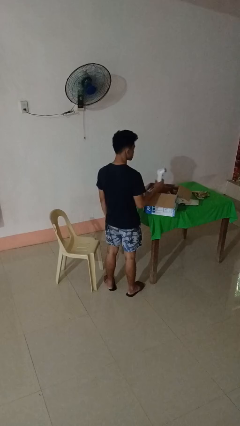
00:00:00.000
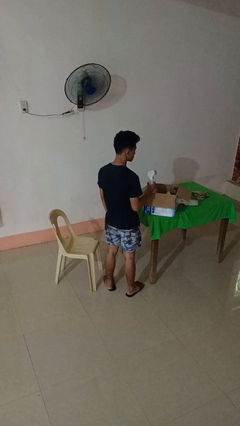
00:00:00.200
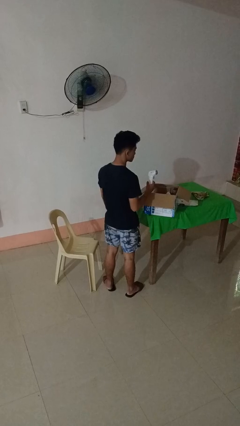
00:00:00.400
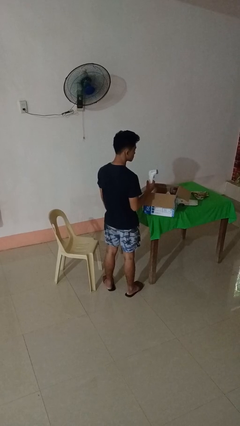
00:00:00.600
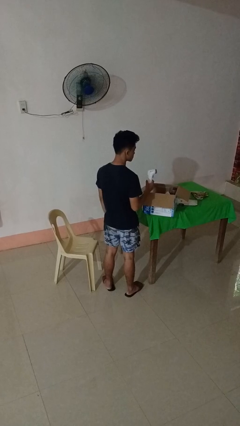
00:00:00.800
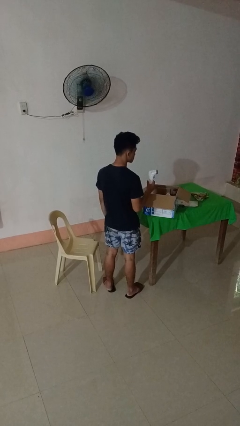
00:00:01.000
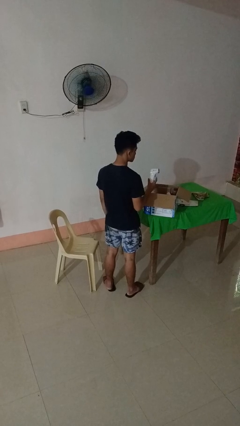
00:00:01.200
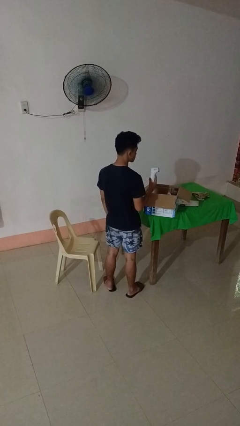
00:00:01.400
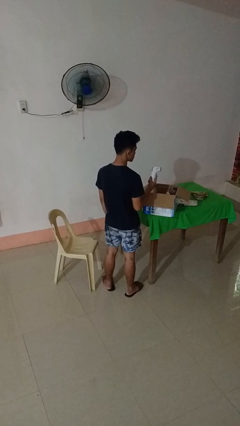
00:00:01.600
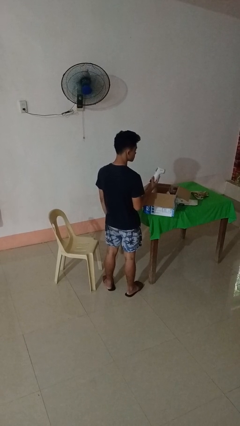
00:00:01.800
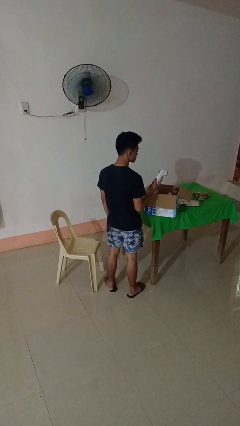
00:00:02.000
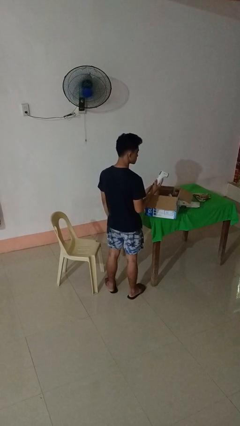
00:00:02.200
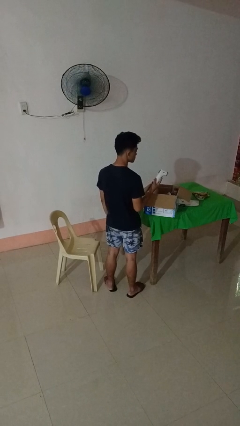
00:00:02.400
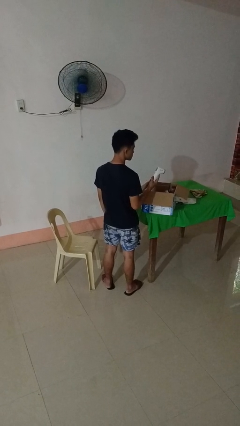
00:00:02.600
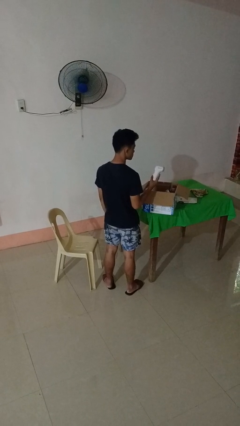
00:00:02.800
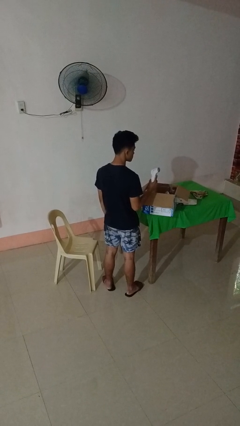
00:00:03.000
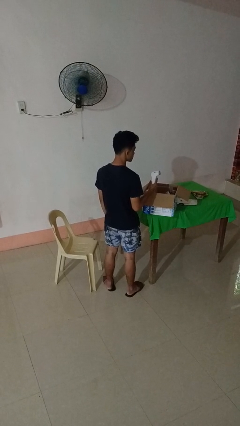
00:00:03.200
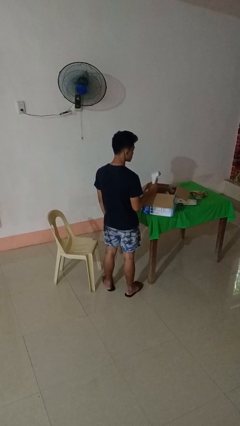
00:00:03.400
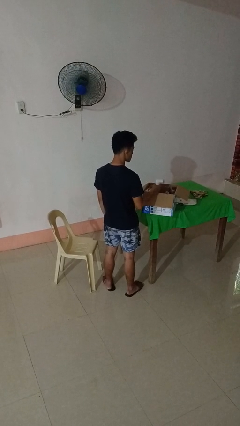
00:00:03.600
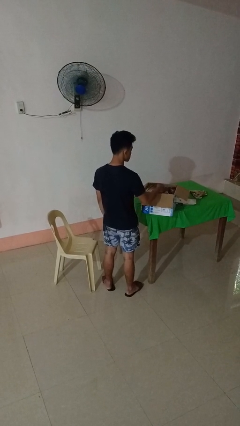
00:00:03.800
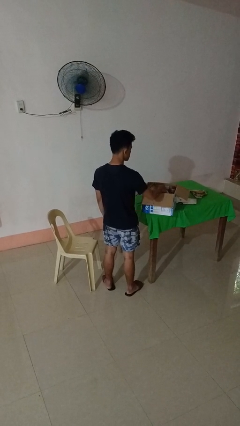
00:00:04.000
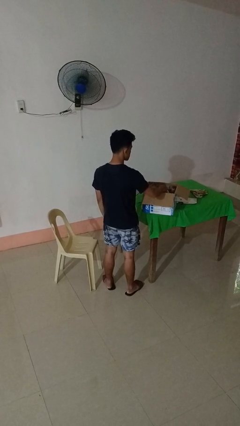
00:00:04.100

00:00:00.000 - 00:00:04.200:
person takes object from box

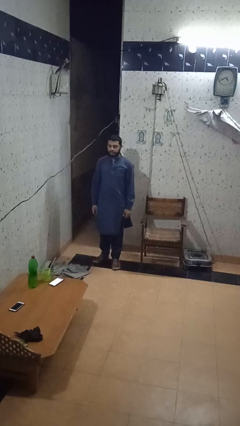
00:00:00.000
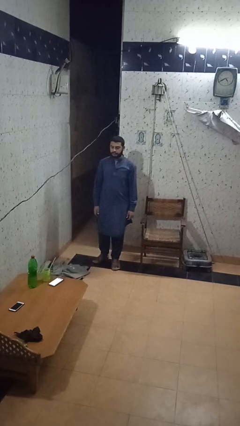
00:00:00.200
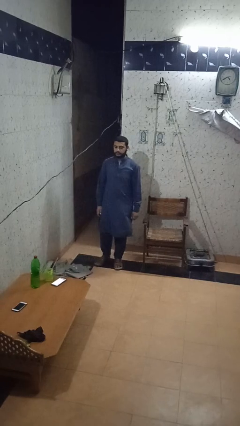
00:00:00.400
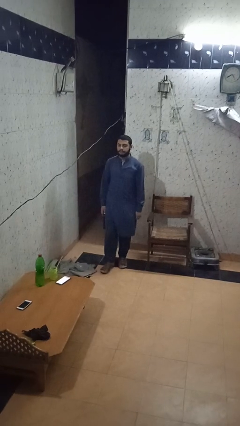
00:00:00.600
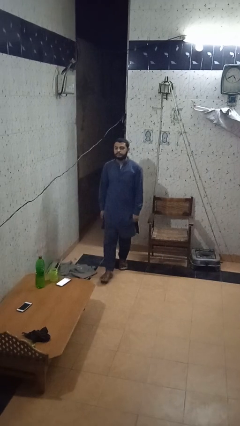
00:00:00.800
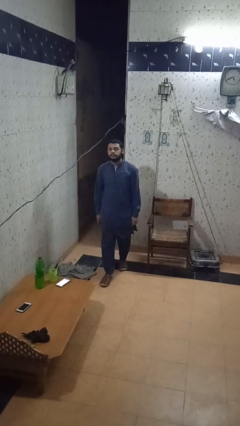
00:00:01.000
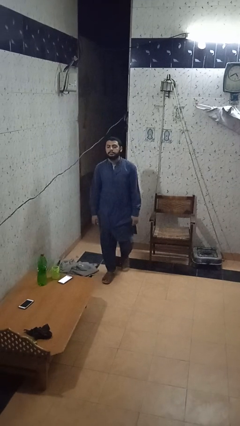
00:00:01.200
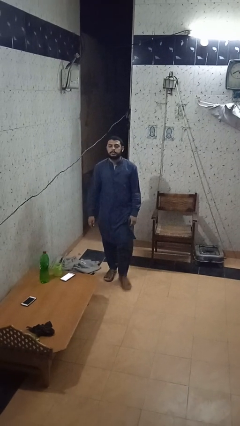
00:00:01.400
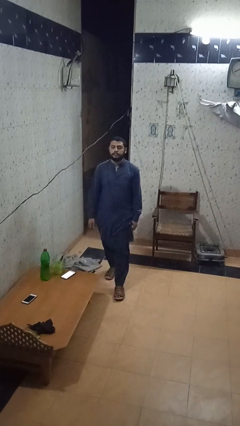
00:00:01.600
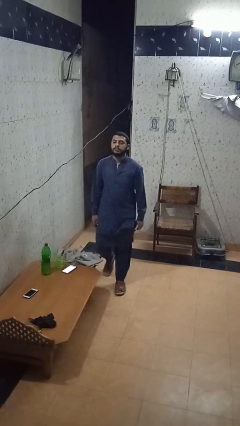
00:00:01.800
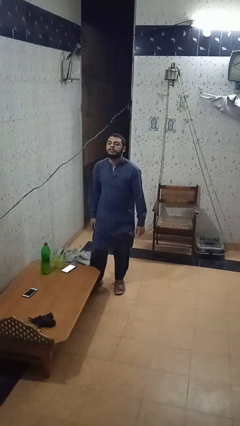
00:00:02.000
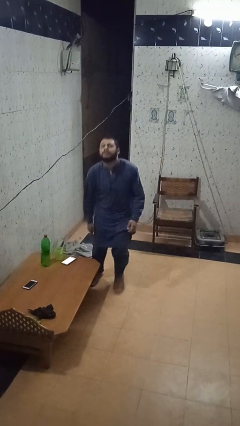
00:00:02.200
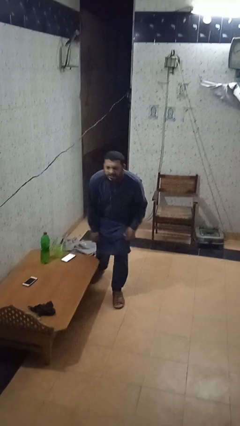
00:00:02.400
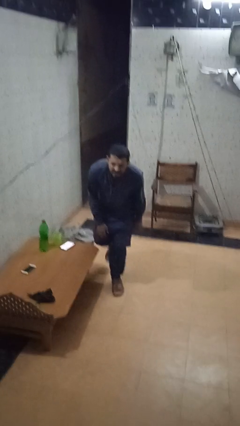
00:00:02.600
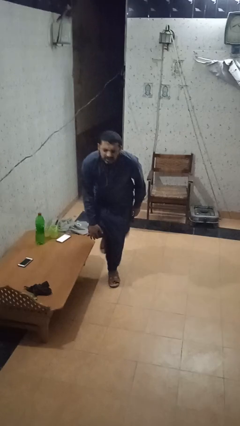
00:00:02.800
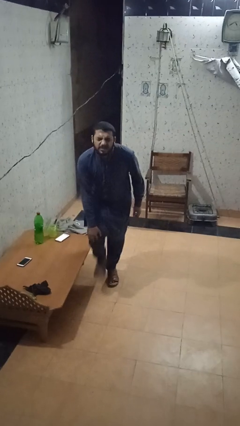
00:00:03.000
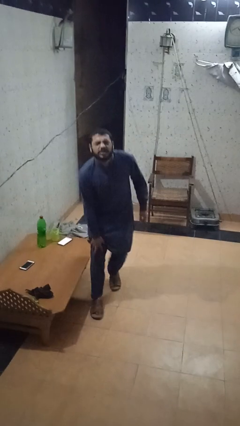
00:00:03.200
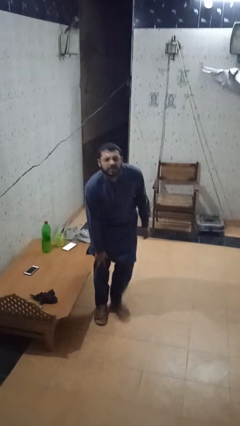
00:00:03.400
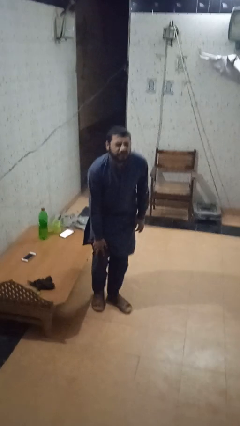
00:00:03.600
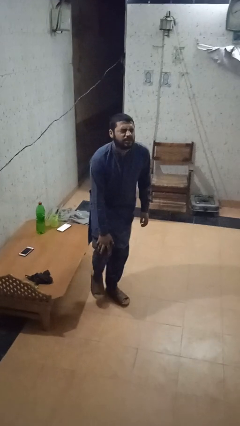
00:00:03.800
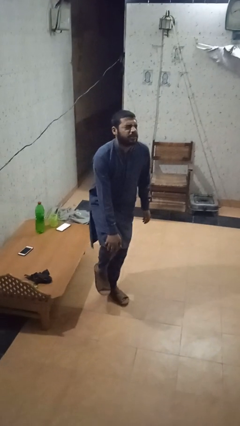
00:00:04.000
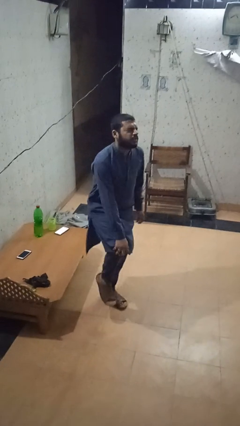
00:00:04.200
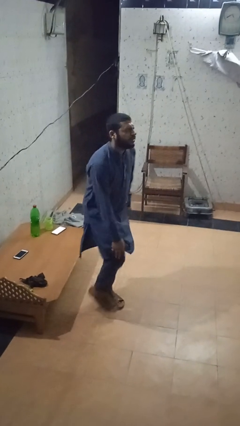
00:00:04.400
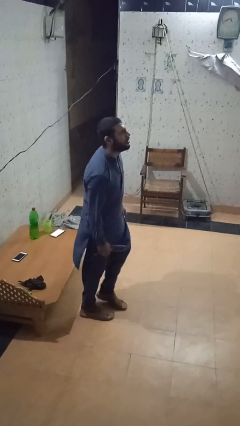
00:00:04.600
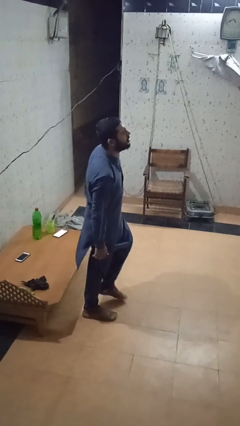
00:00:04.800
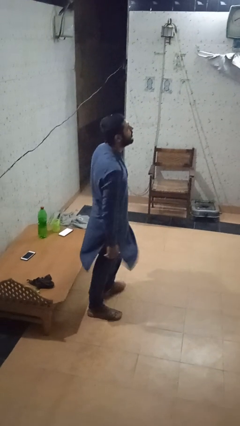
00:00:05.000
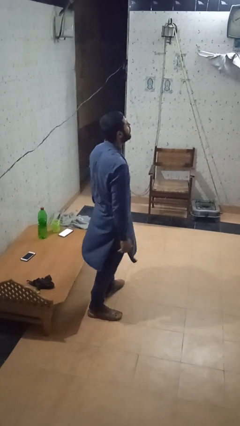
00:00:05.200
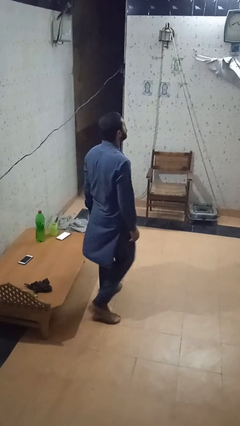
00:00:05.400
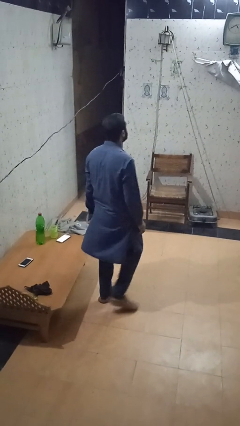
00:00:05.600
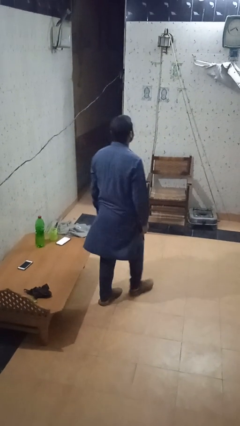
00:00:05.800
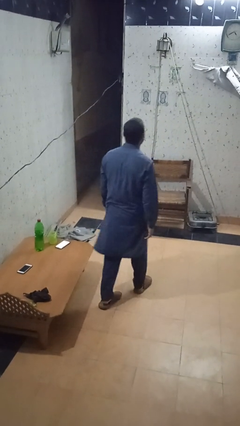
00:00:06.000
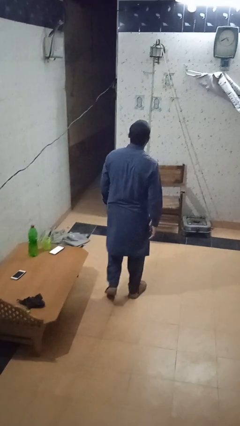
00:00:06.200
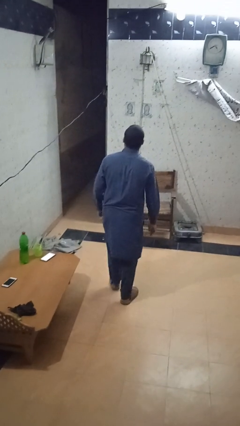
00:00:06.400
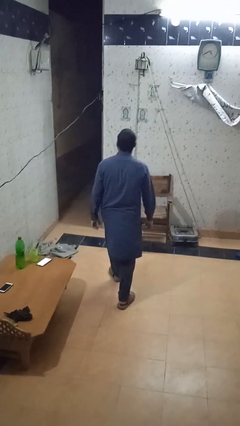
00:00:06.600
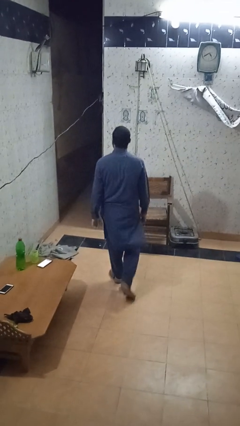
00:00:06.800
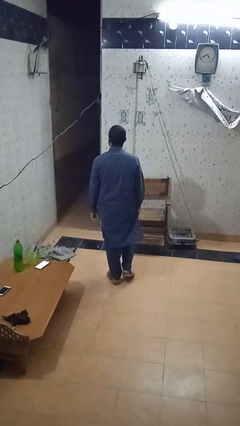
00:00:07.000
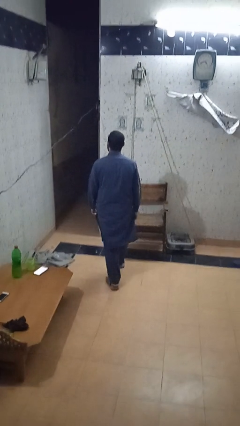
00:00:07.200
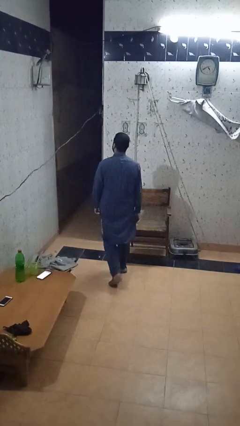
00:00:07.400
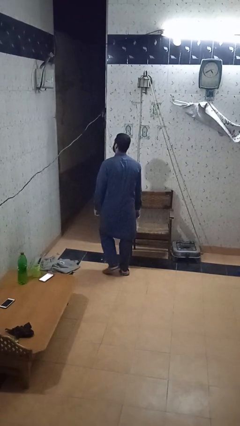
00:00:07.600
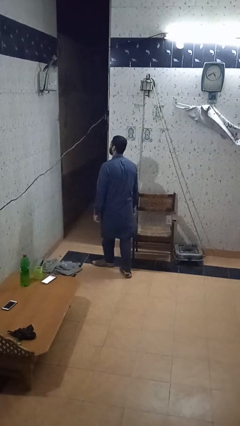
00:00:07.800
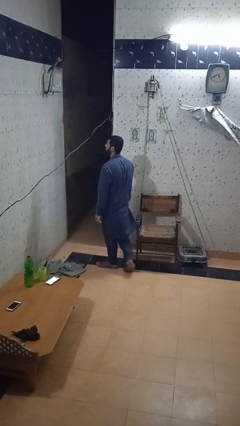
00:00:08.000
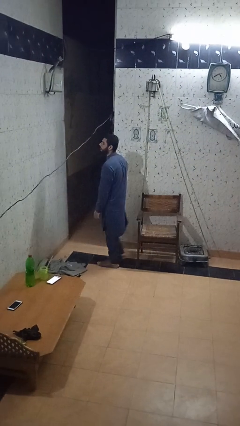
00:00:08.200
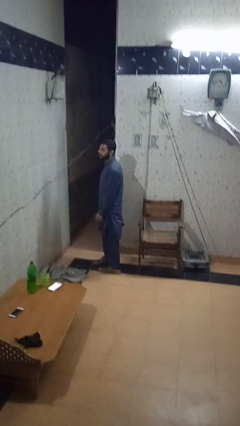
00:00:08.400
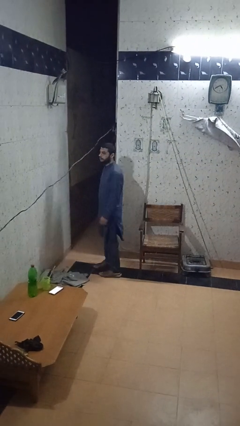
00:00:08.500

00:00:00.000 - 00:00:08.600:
person bumps into table

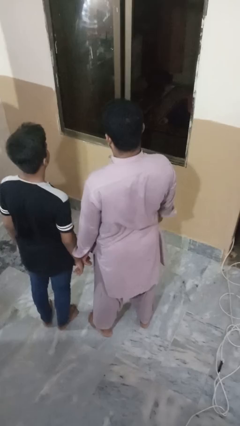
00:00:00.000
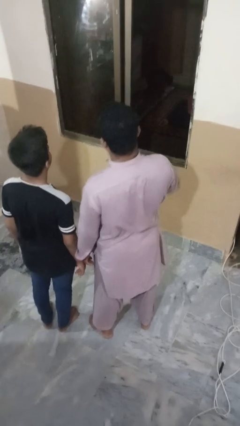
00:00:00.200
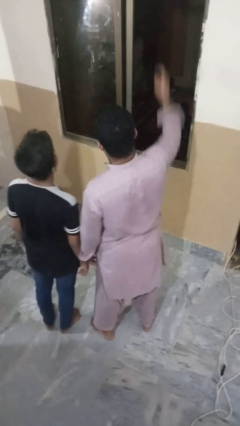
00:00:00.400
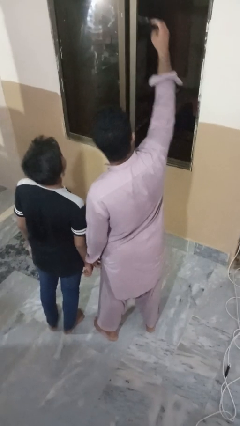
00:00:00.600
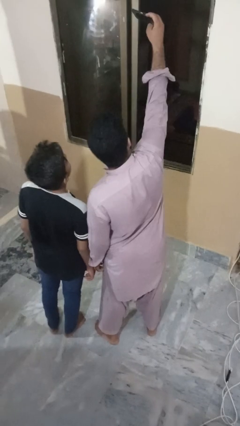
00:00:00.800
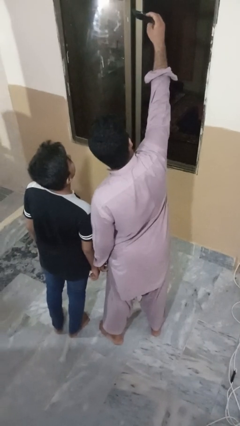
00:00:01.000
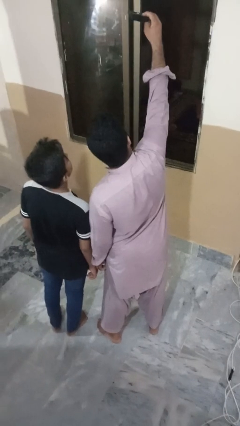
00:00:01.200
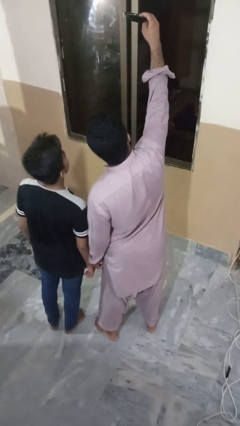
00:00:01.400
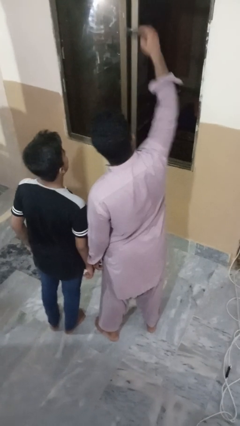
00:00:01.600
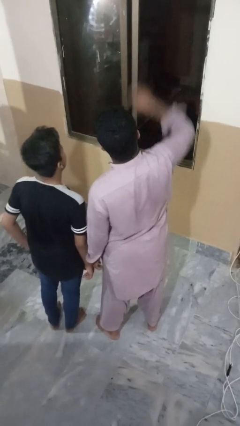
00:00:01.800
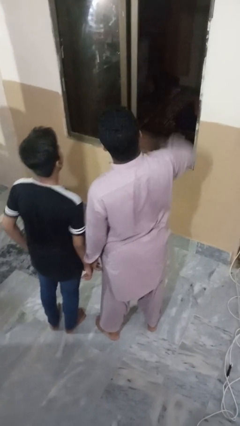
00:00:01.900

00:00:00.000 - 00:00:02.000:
person takes selfie with person

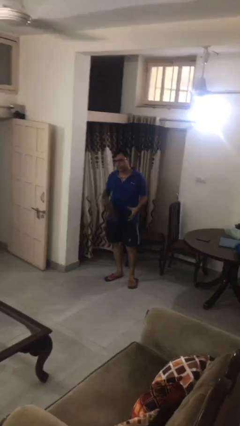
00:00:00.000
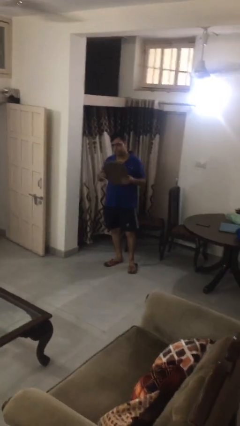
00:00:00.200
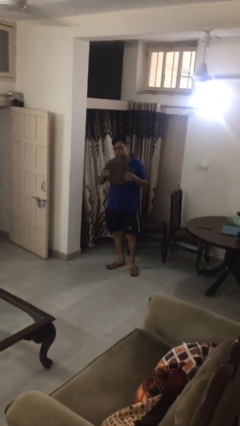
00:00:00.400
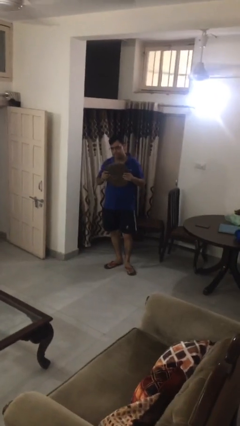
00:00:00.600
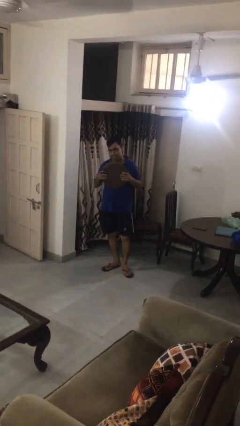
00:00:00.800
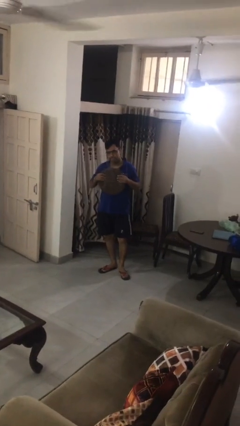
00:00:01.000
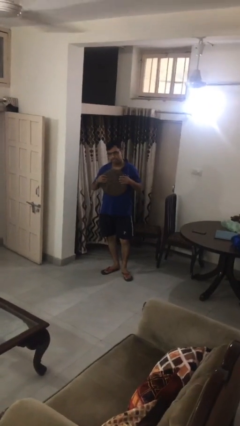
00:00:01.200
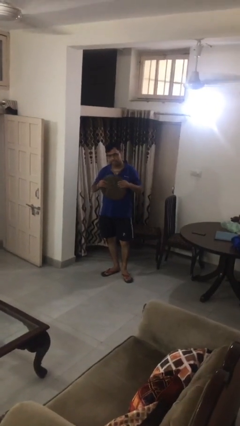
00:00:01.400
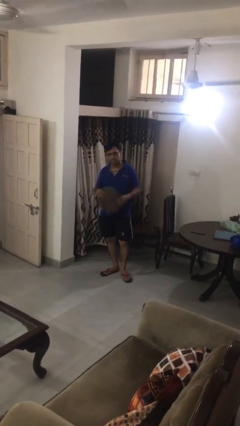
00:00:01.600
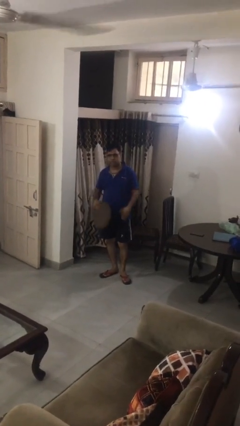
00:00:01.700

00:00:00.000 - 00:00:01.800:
person squeezes object

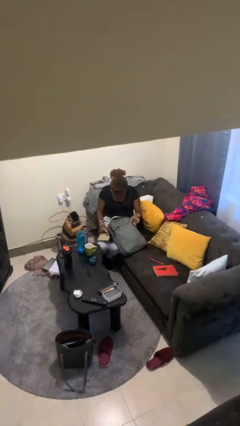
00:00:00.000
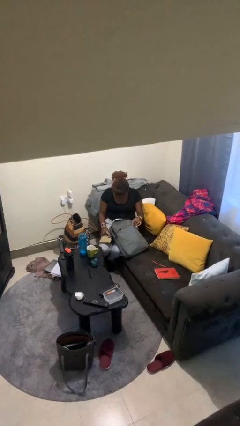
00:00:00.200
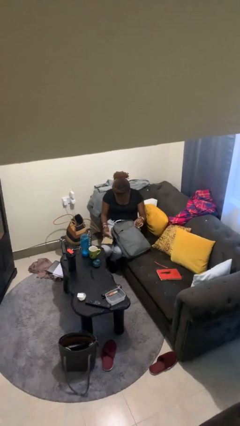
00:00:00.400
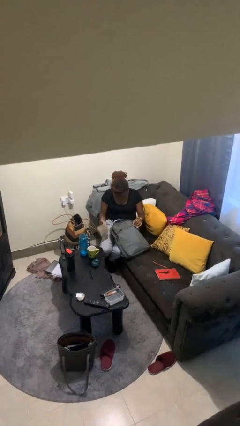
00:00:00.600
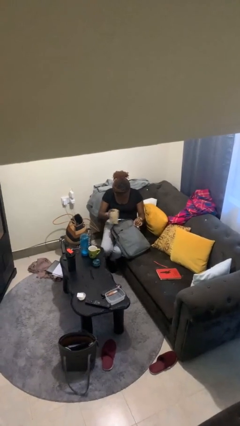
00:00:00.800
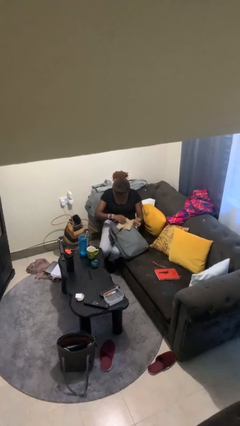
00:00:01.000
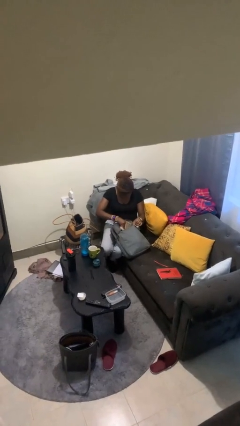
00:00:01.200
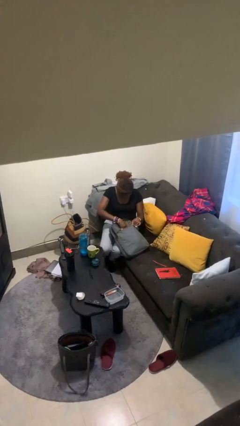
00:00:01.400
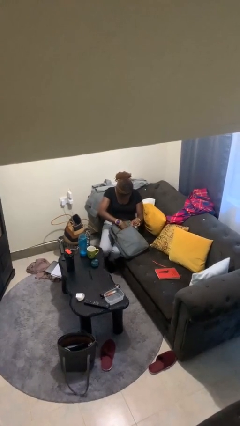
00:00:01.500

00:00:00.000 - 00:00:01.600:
person puts object into backpack
